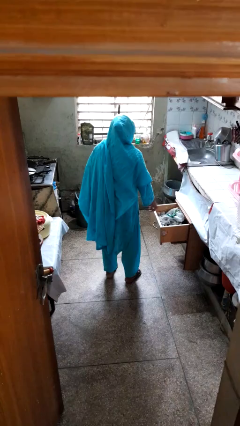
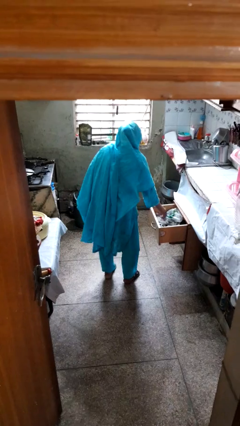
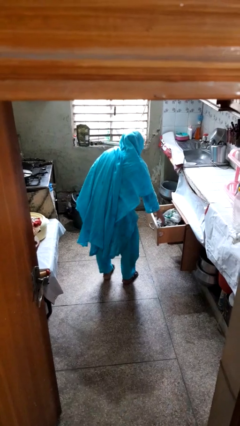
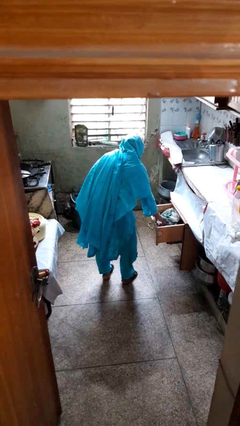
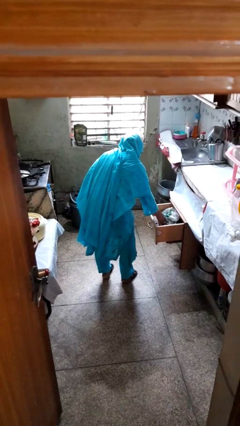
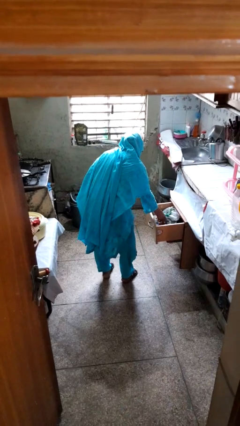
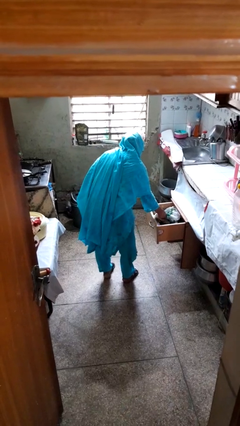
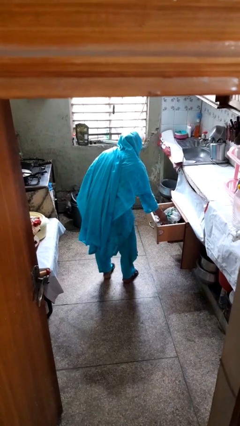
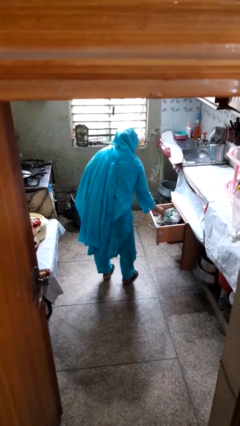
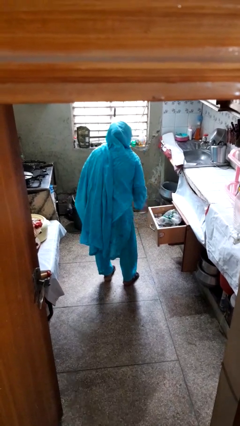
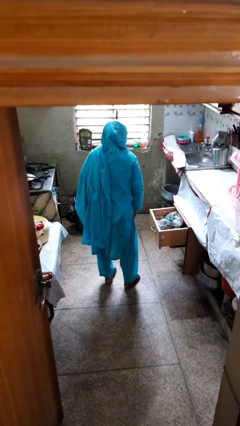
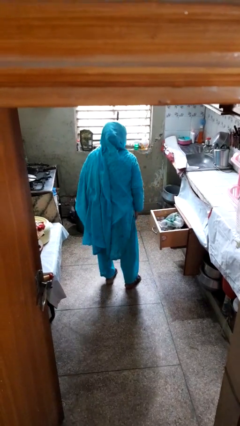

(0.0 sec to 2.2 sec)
person searches in kitchen drawer

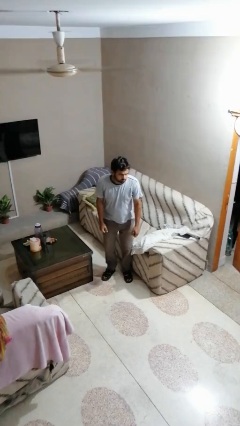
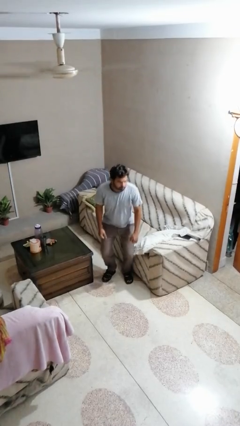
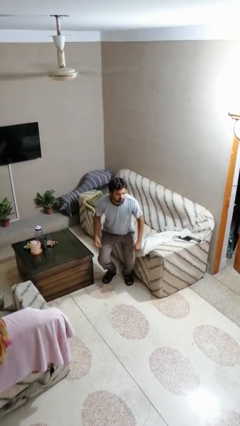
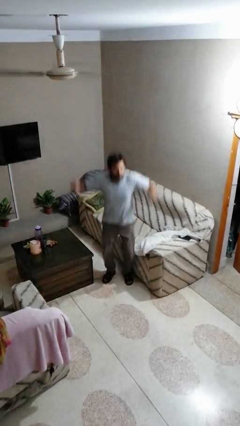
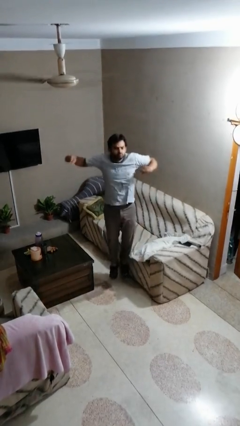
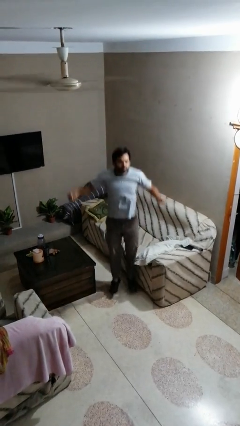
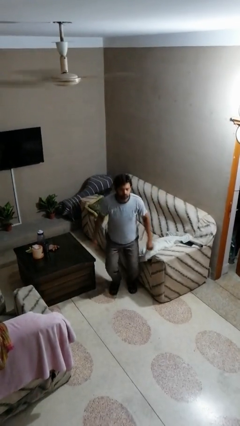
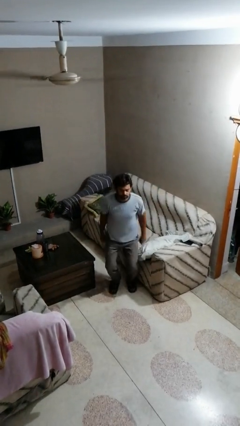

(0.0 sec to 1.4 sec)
person jumps

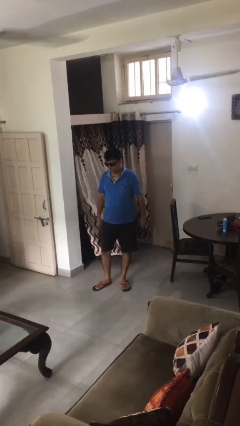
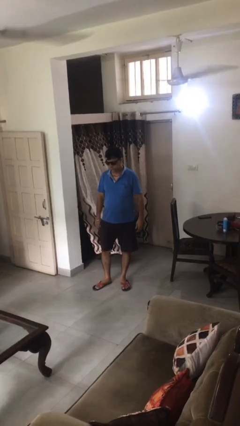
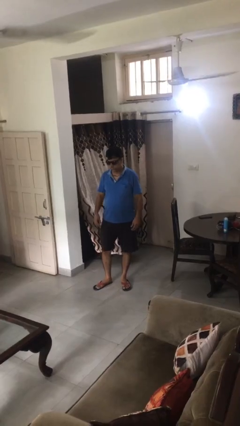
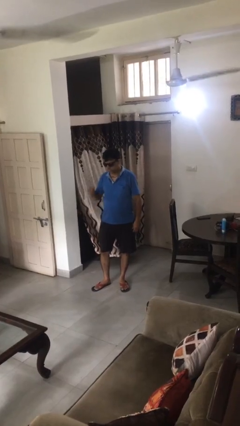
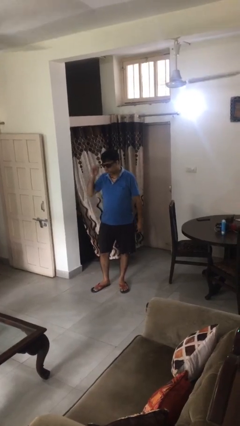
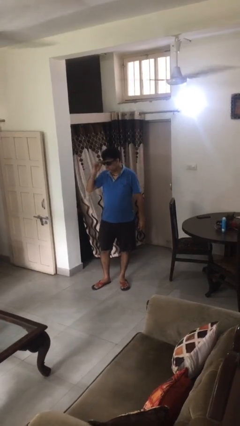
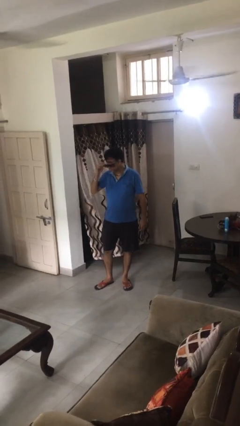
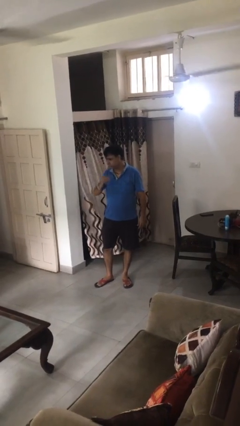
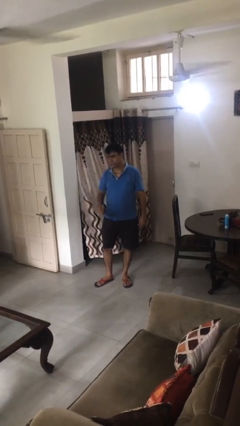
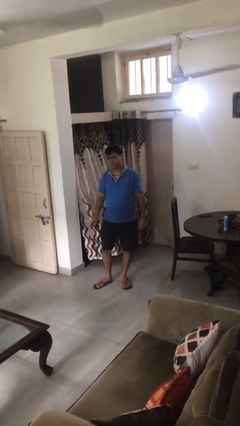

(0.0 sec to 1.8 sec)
person takes off sunglasses

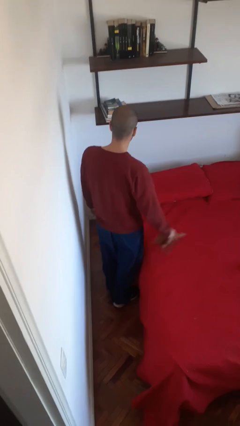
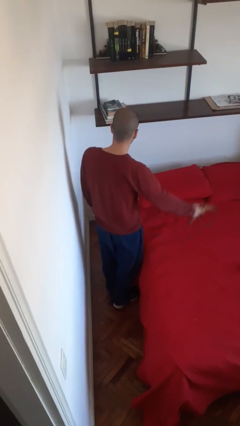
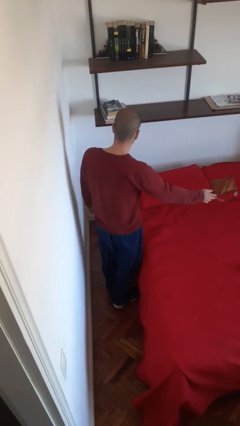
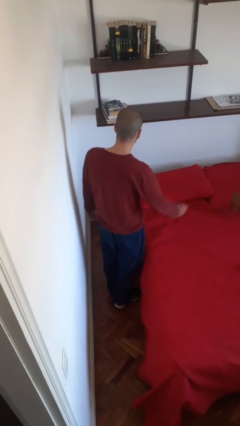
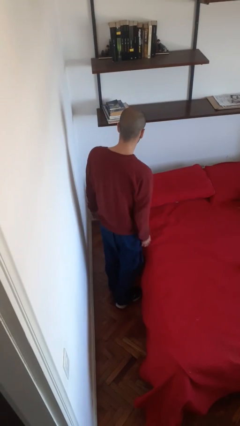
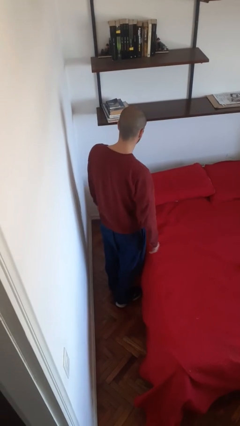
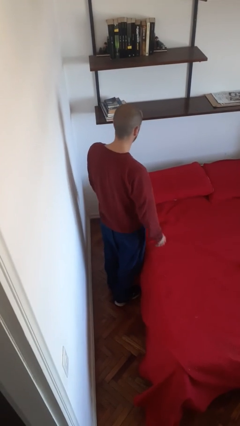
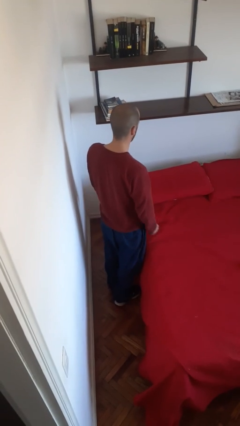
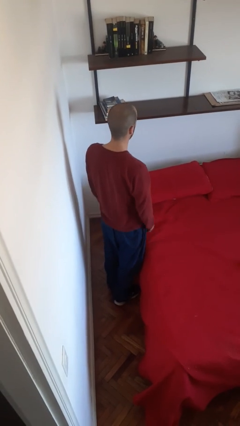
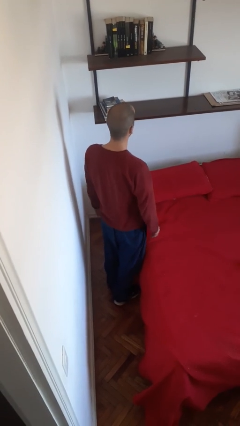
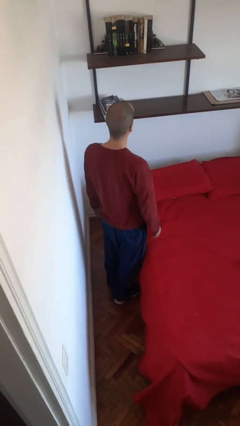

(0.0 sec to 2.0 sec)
person throws object on bed

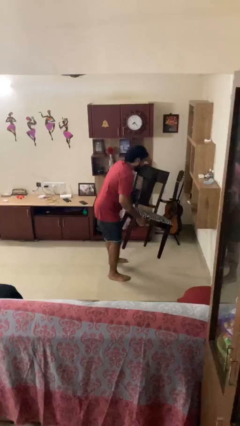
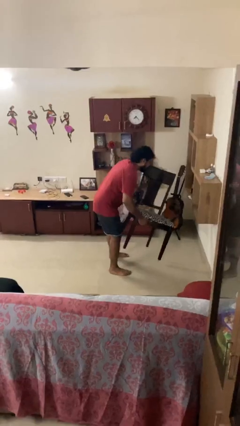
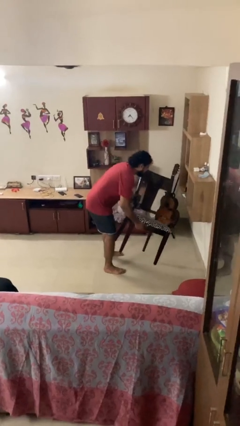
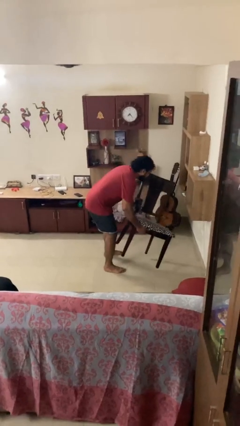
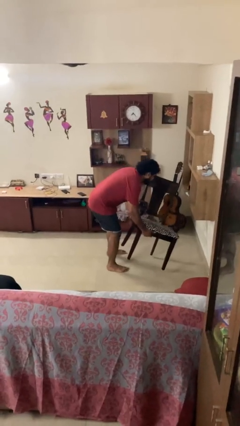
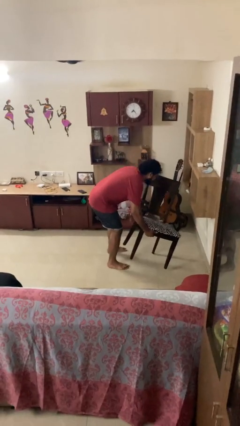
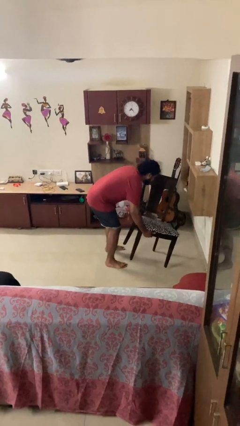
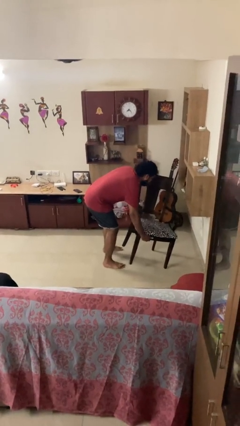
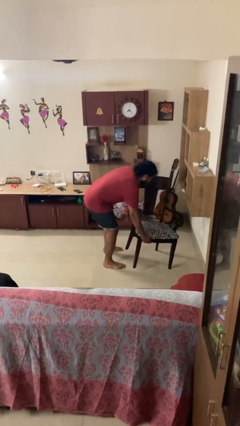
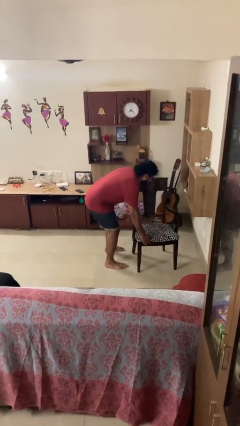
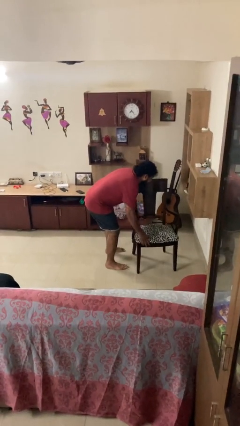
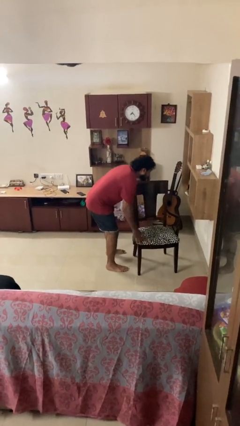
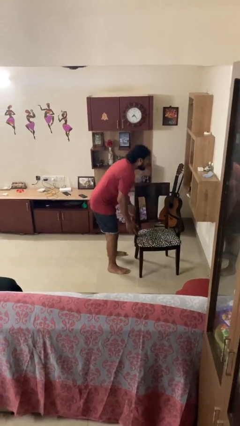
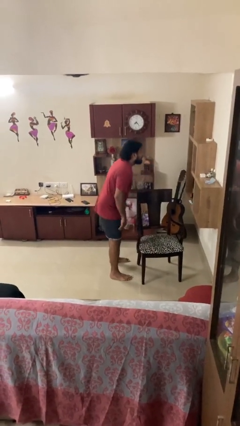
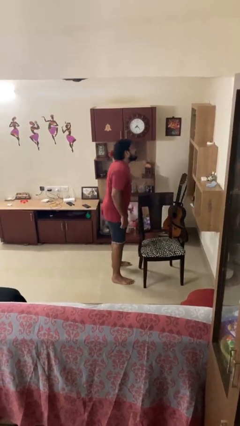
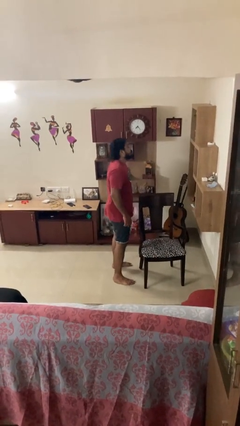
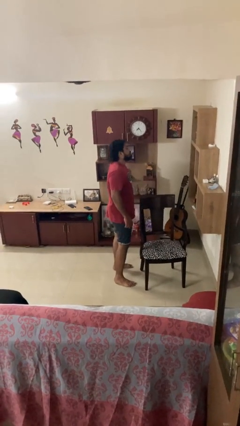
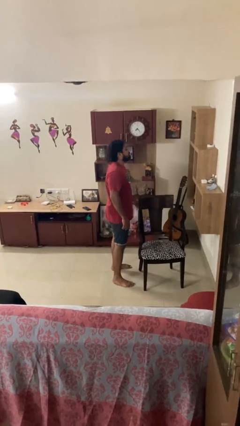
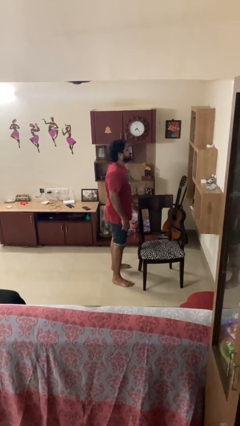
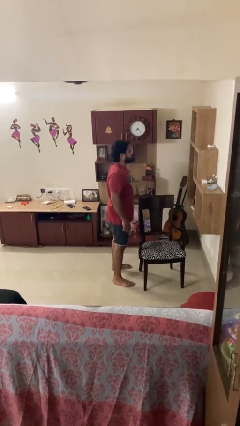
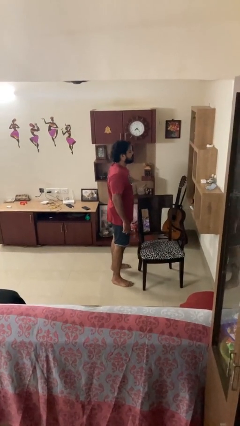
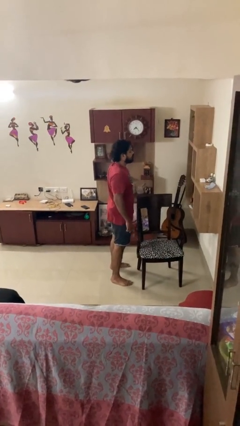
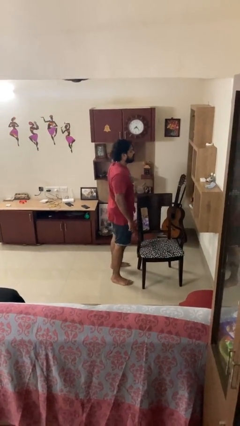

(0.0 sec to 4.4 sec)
person puts down object on floor

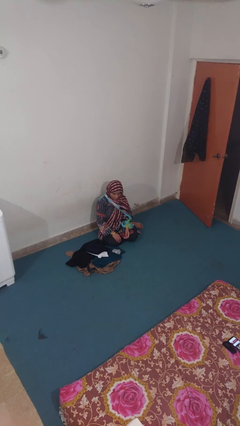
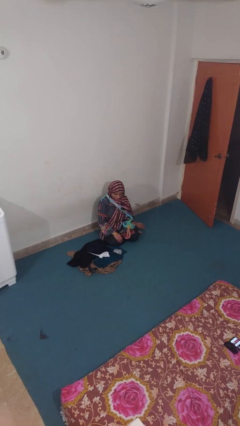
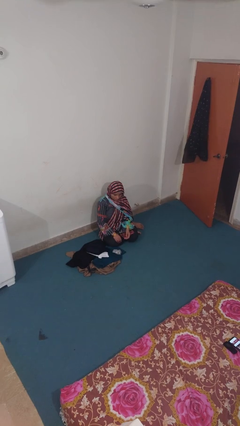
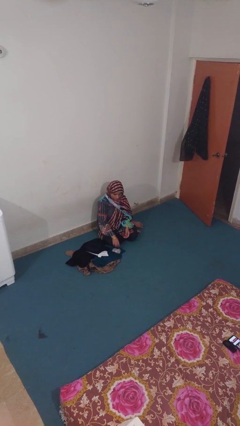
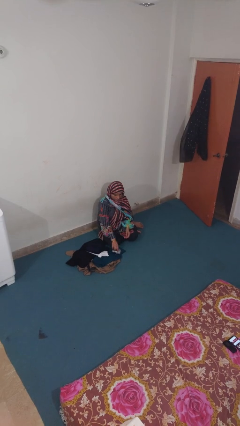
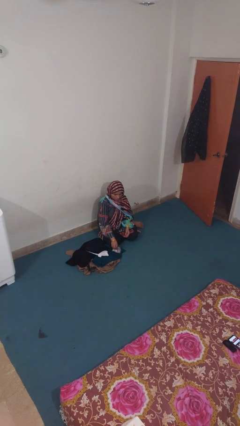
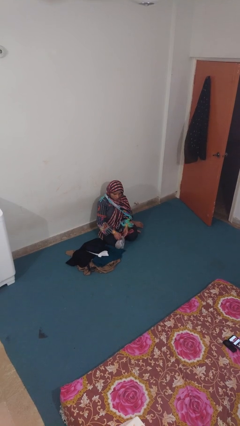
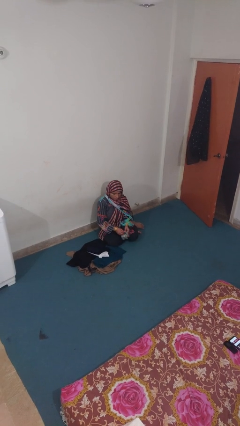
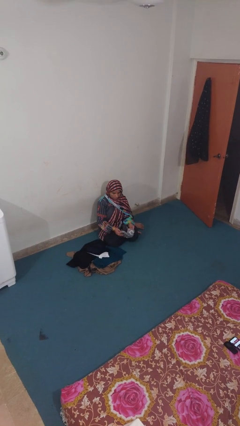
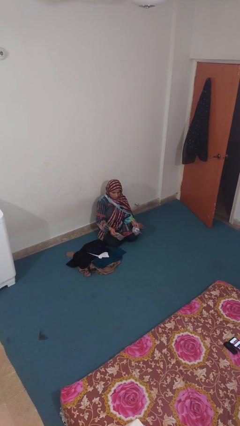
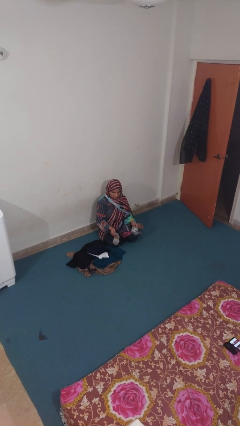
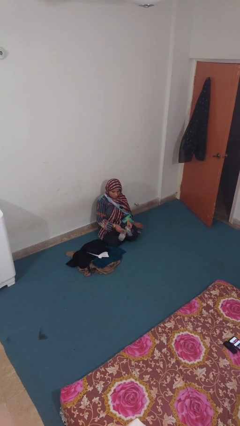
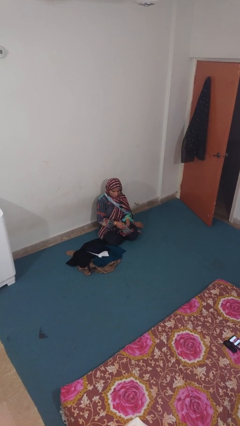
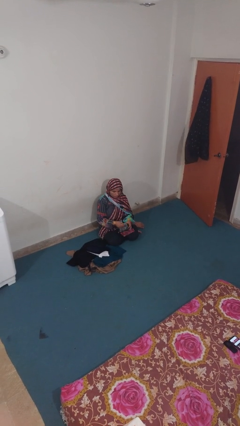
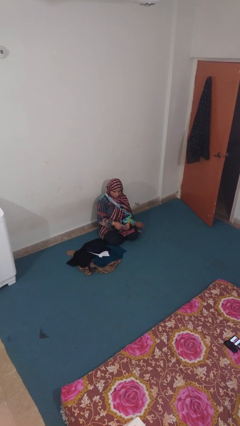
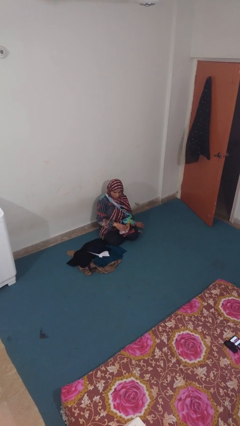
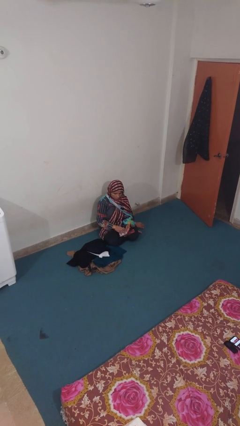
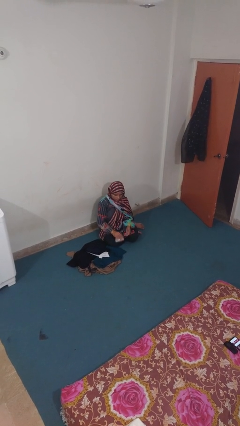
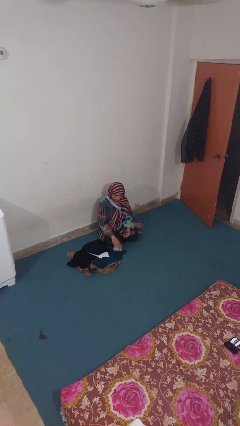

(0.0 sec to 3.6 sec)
person folds socks

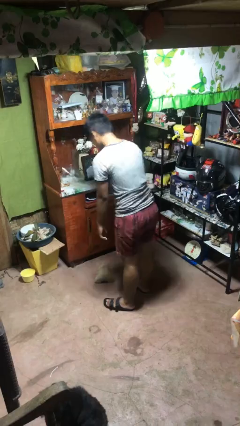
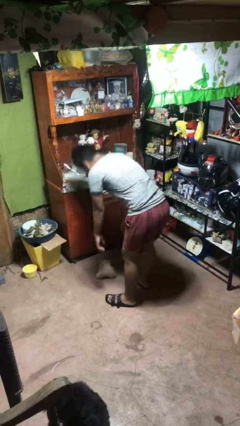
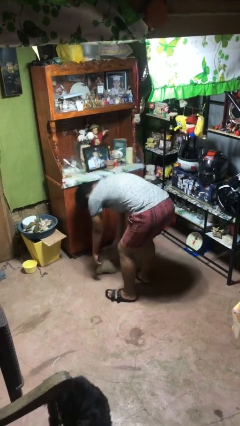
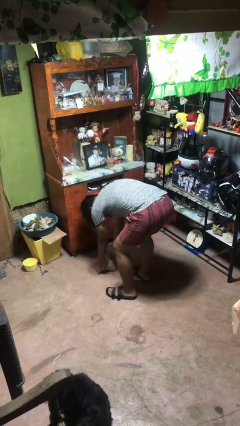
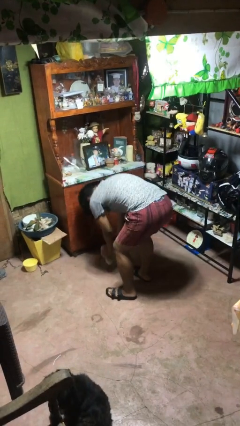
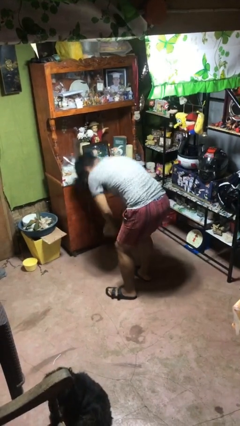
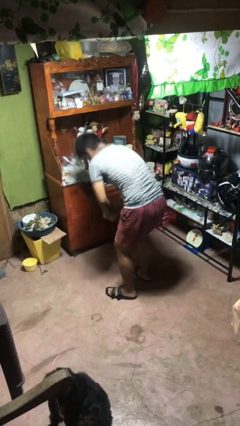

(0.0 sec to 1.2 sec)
person picks up object from floor

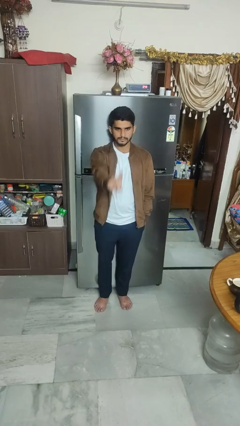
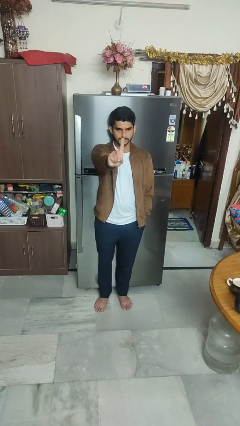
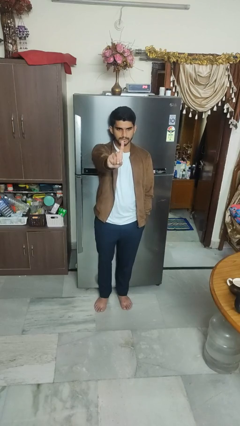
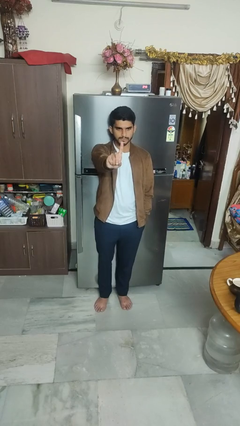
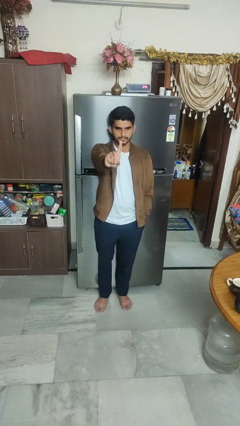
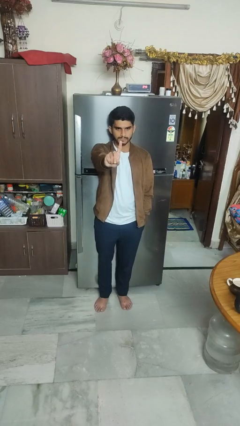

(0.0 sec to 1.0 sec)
person gestures number one
